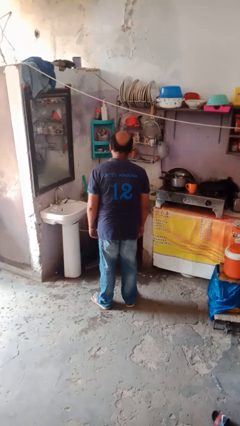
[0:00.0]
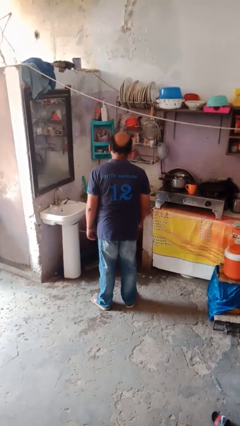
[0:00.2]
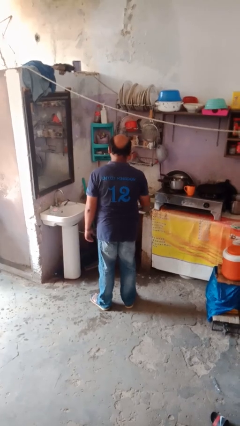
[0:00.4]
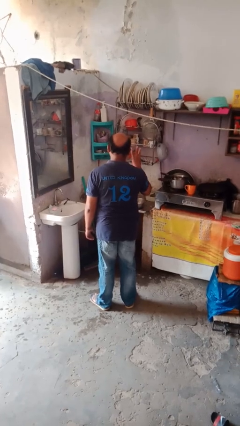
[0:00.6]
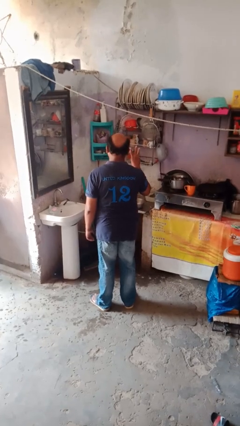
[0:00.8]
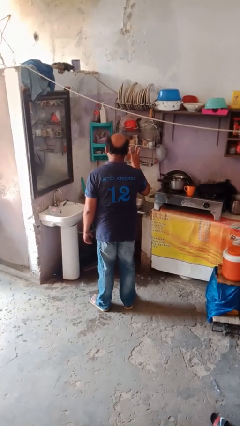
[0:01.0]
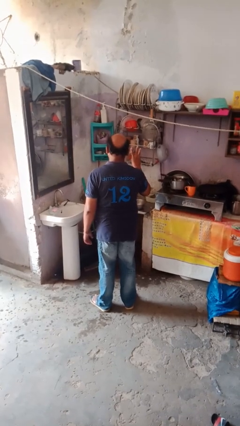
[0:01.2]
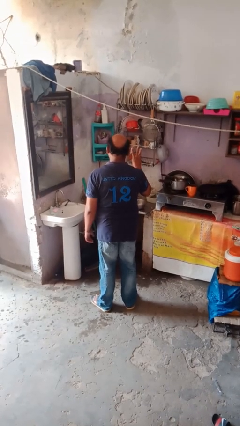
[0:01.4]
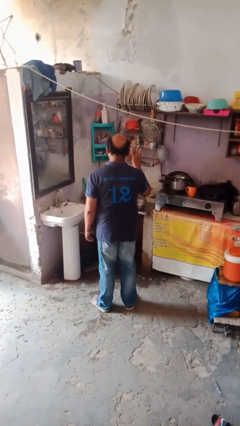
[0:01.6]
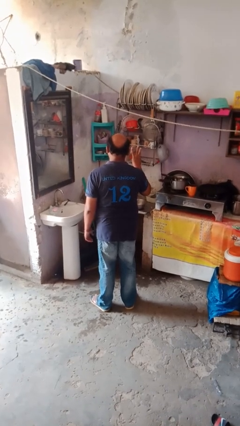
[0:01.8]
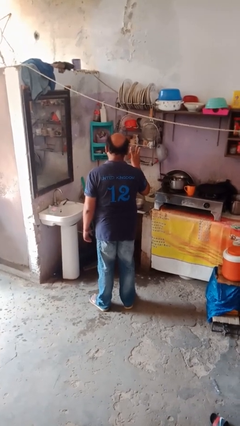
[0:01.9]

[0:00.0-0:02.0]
person gestures number three

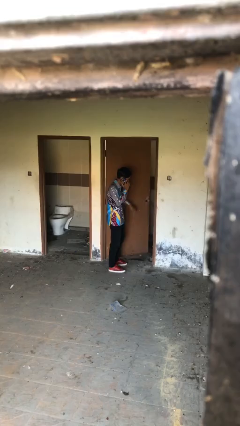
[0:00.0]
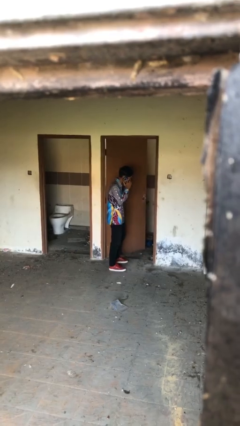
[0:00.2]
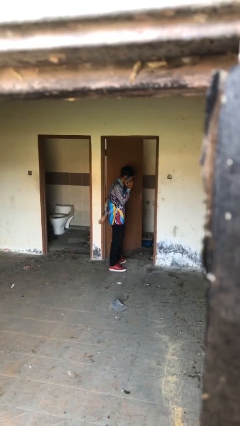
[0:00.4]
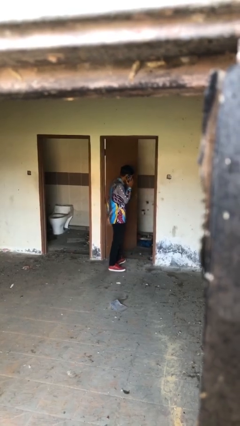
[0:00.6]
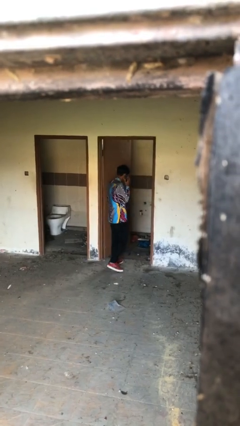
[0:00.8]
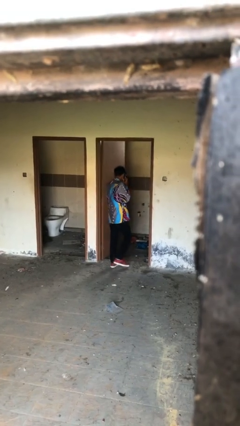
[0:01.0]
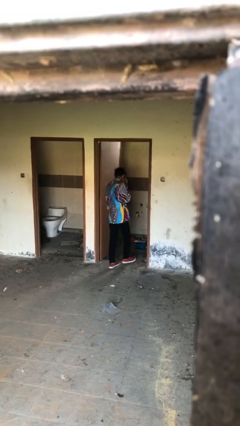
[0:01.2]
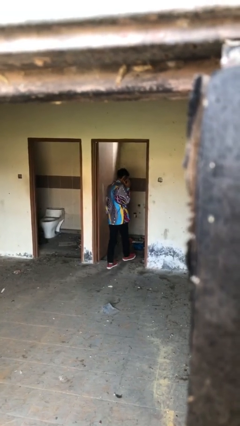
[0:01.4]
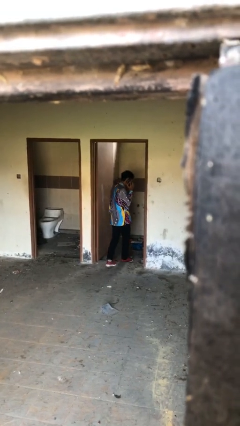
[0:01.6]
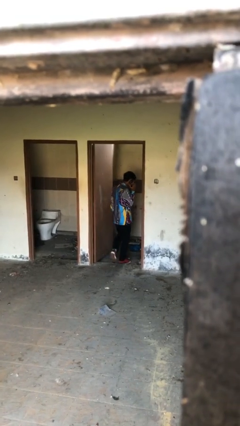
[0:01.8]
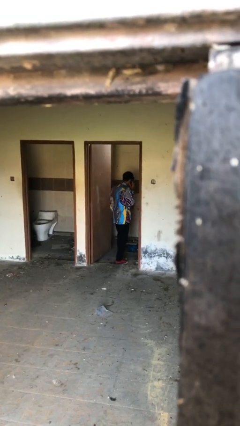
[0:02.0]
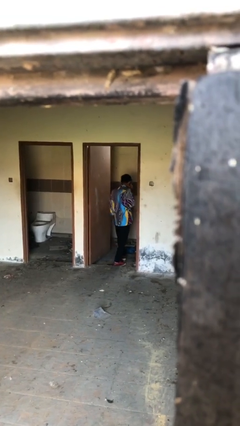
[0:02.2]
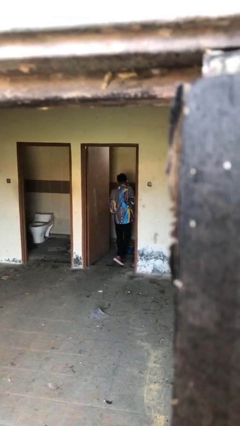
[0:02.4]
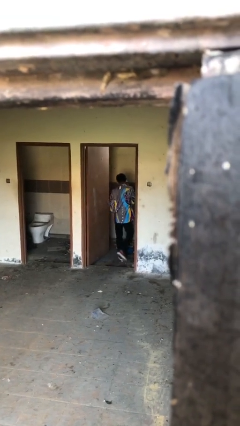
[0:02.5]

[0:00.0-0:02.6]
person exits scene through structure

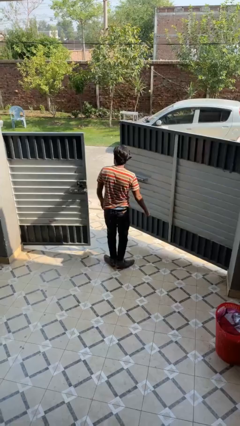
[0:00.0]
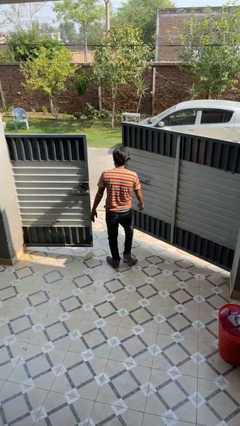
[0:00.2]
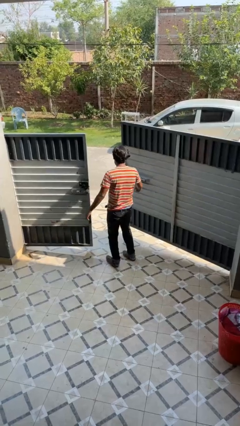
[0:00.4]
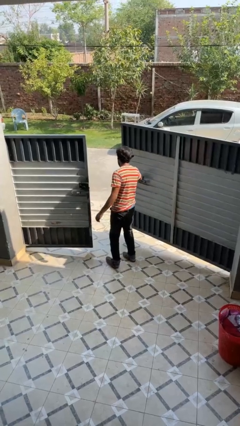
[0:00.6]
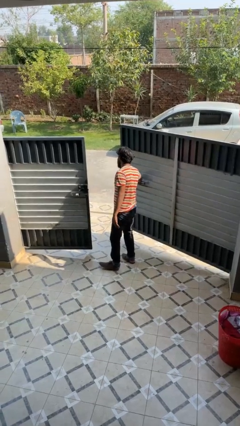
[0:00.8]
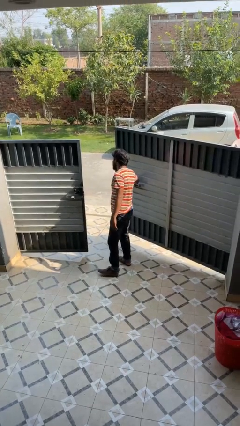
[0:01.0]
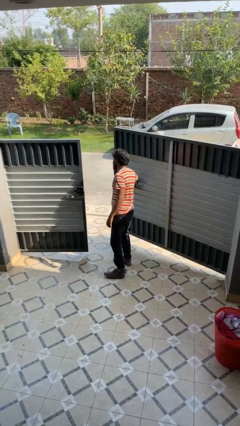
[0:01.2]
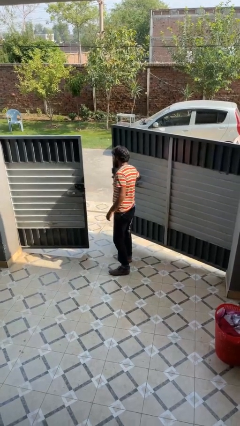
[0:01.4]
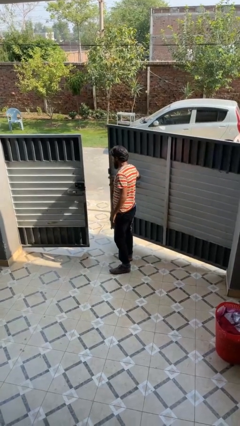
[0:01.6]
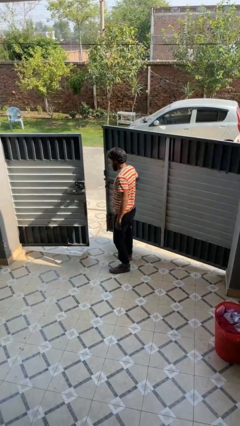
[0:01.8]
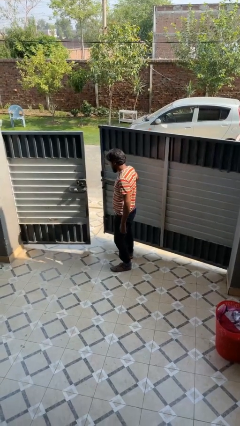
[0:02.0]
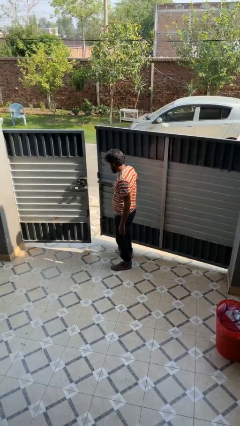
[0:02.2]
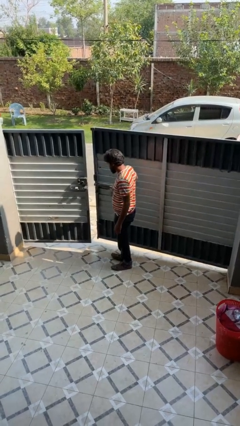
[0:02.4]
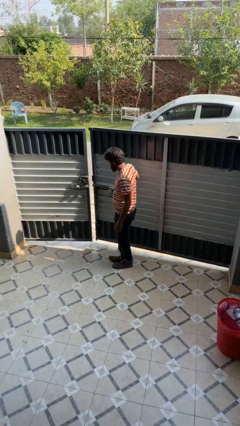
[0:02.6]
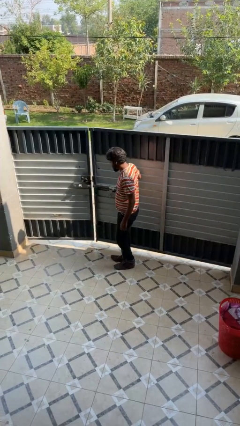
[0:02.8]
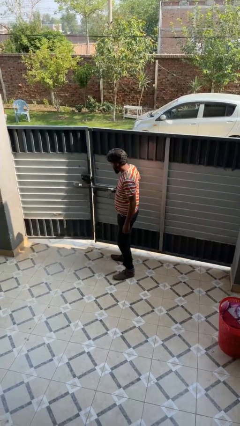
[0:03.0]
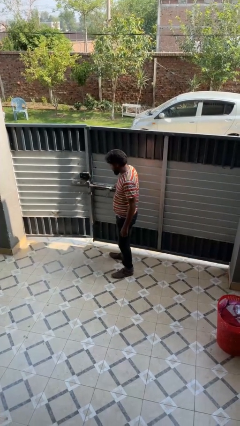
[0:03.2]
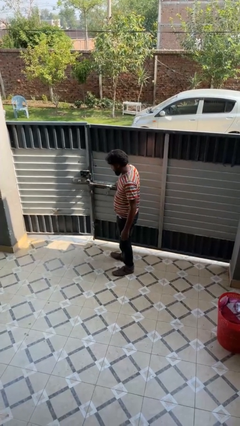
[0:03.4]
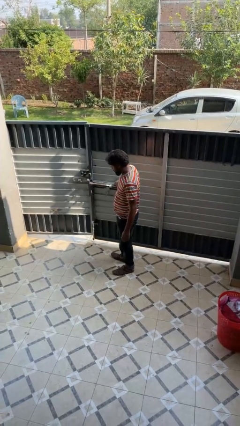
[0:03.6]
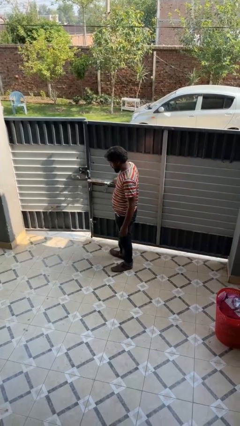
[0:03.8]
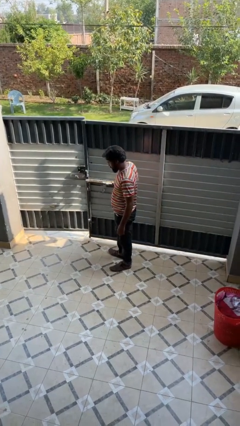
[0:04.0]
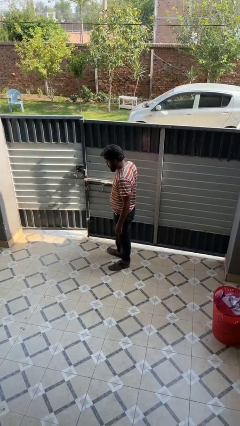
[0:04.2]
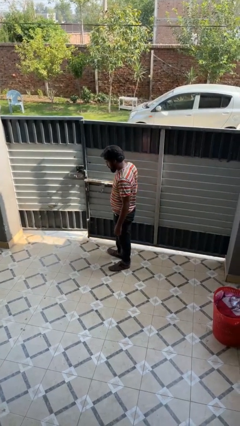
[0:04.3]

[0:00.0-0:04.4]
person closes gate

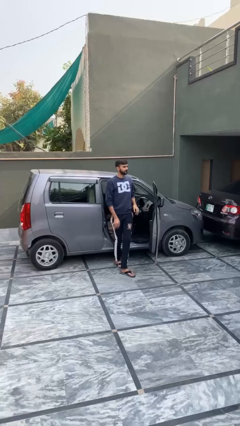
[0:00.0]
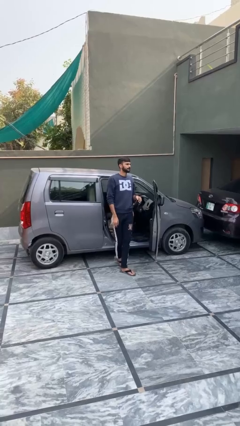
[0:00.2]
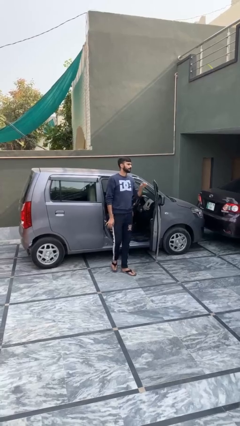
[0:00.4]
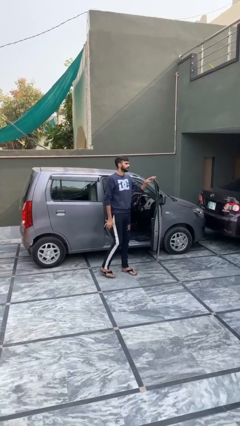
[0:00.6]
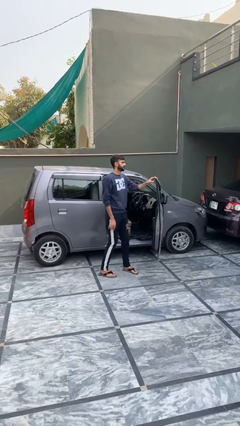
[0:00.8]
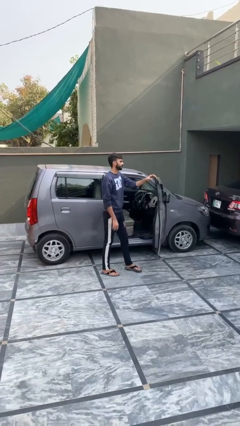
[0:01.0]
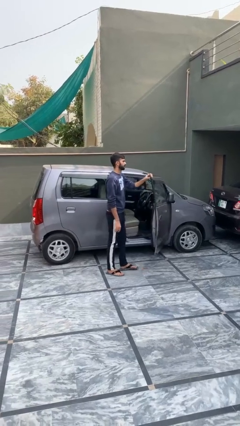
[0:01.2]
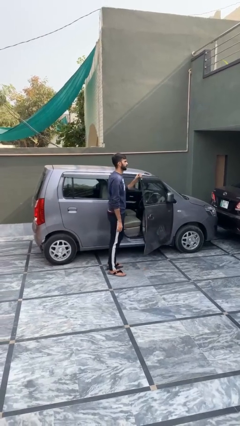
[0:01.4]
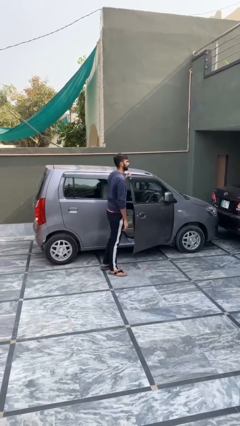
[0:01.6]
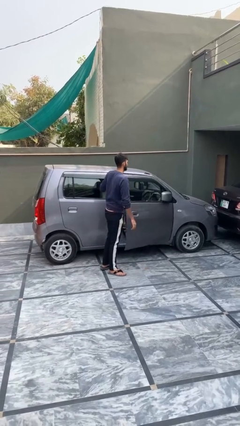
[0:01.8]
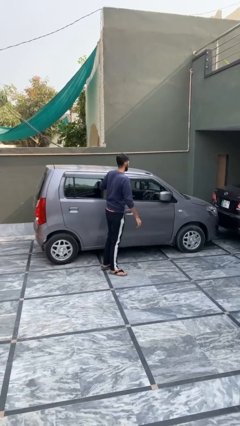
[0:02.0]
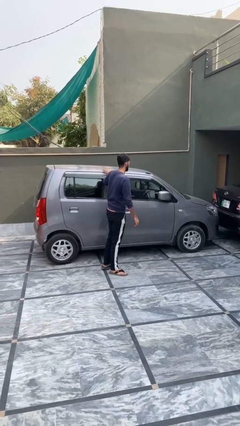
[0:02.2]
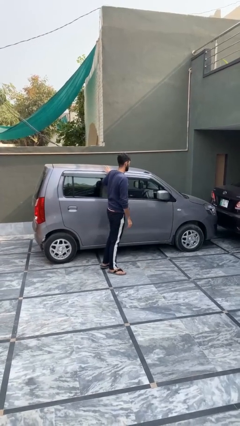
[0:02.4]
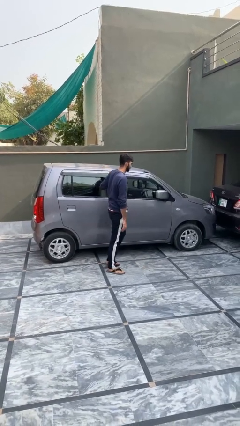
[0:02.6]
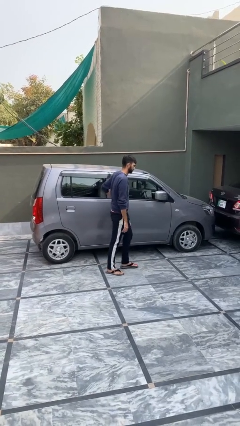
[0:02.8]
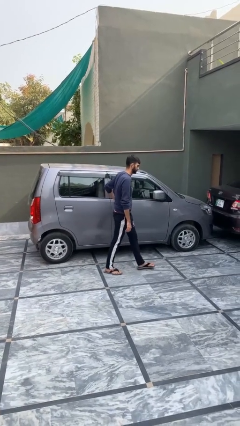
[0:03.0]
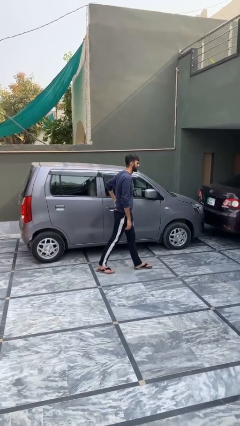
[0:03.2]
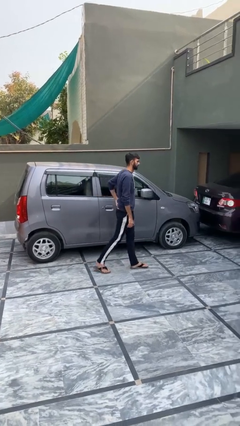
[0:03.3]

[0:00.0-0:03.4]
person closes car door

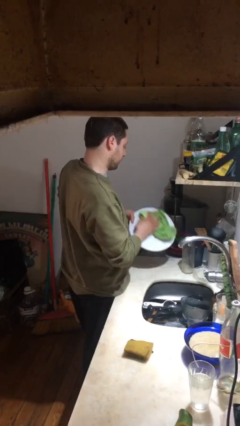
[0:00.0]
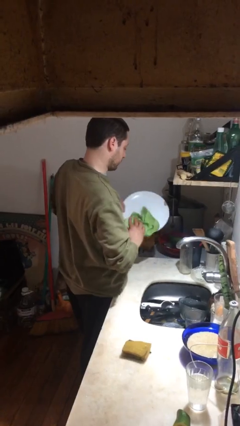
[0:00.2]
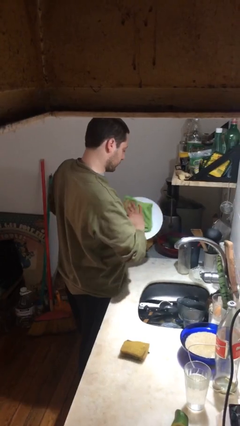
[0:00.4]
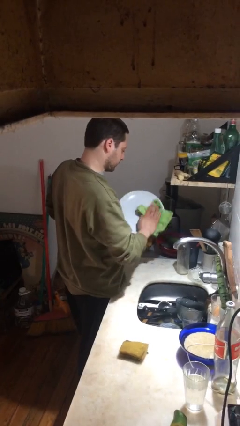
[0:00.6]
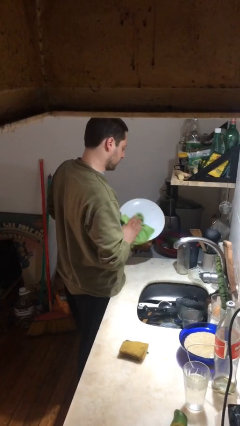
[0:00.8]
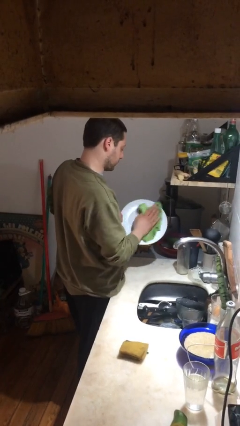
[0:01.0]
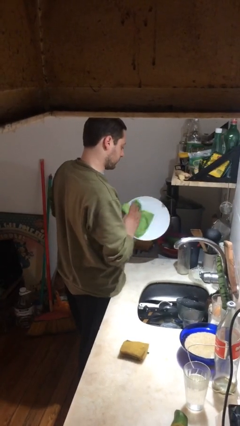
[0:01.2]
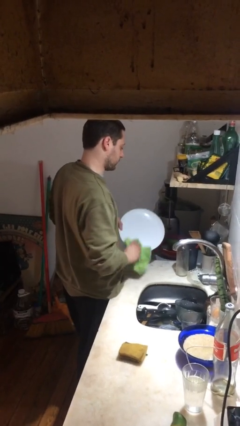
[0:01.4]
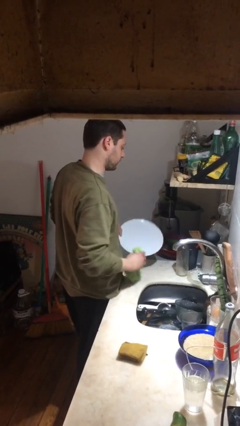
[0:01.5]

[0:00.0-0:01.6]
person dries dish

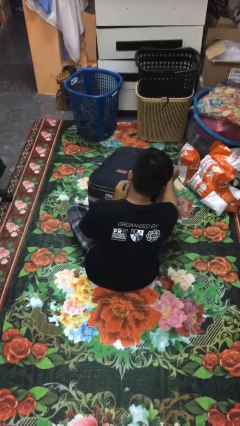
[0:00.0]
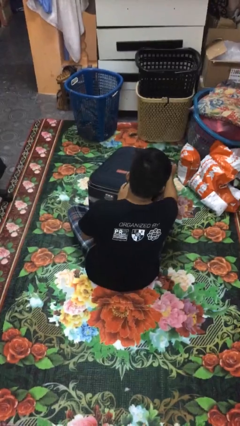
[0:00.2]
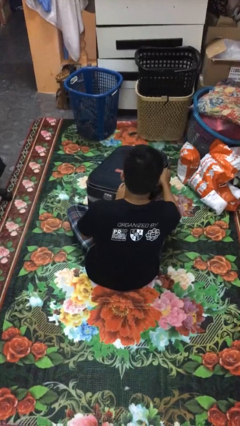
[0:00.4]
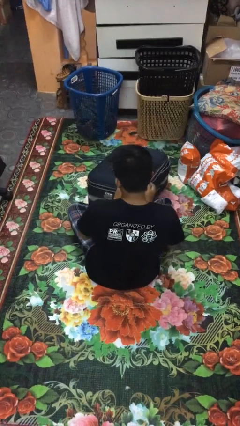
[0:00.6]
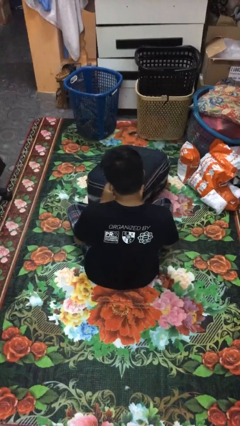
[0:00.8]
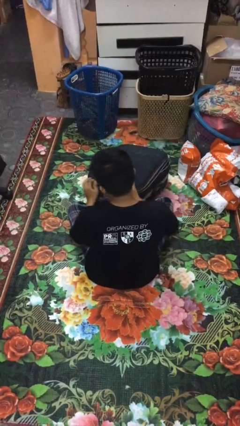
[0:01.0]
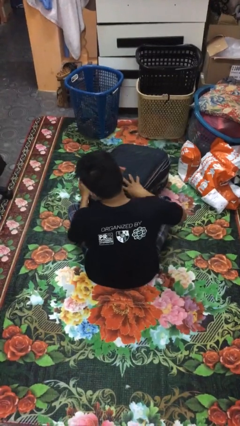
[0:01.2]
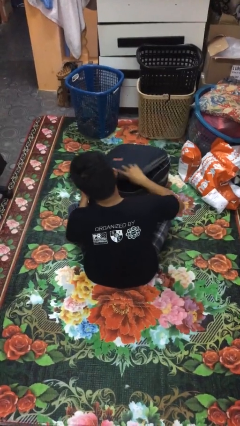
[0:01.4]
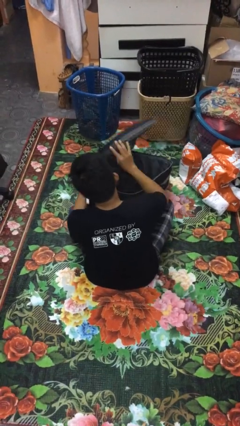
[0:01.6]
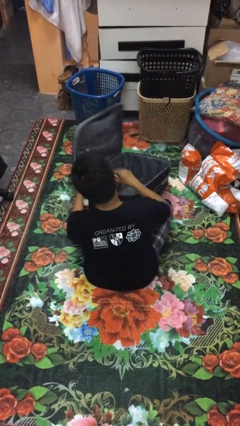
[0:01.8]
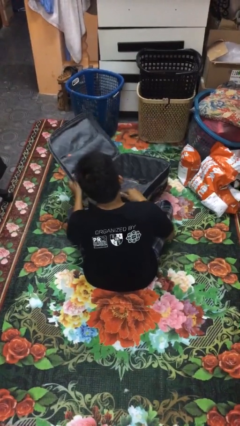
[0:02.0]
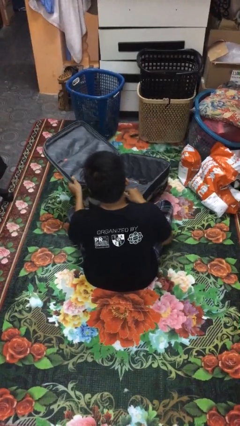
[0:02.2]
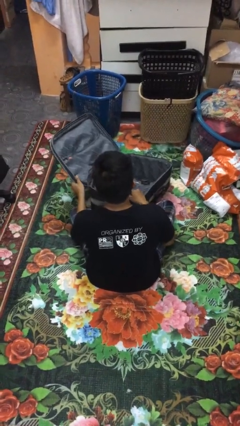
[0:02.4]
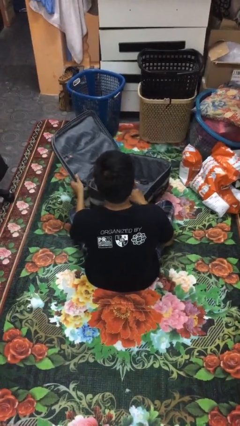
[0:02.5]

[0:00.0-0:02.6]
person opens suitcase

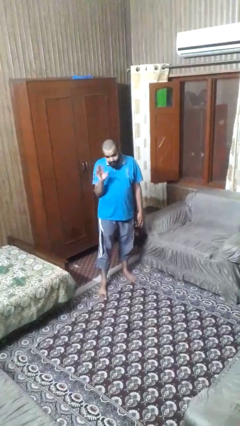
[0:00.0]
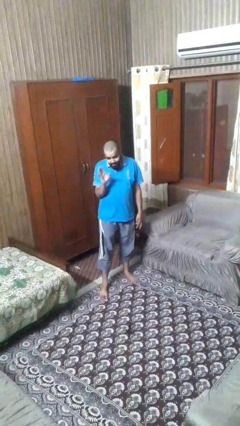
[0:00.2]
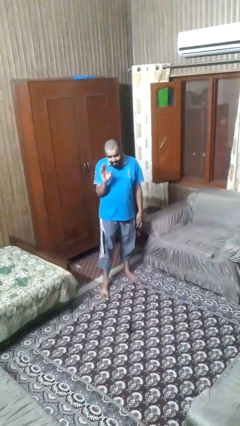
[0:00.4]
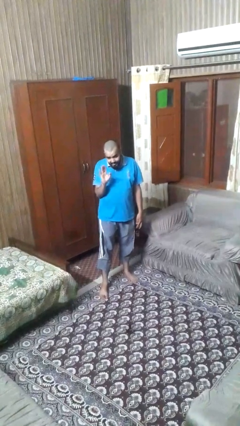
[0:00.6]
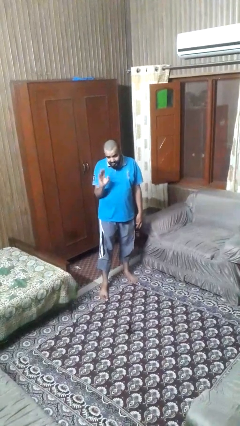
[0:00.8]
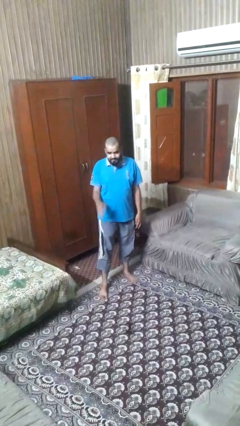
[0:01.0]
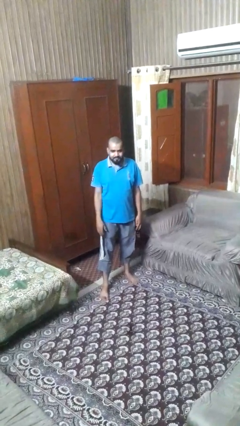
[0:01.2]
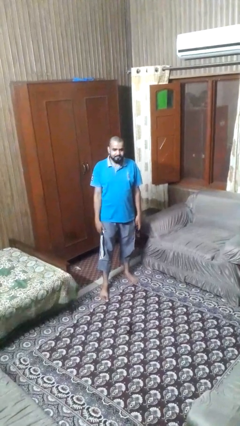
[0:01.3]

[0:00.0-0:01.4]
person waves at person
